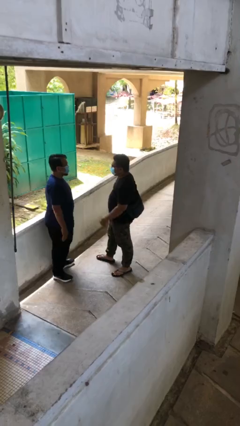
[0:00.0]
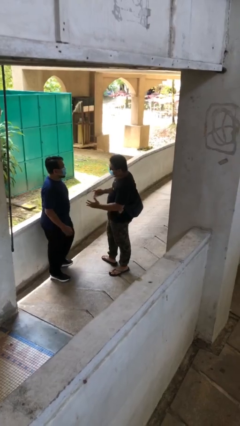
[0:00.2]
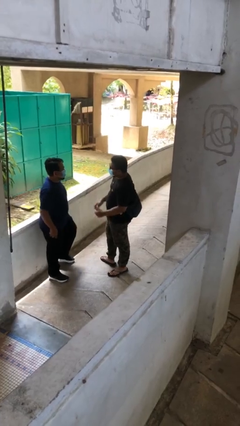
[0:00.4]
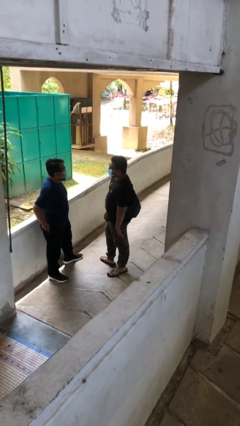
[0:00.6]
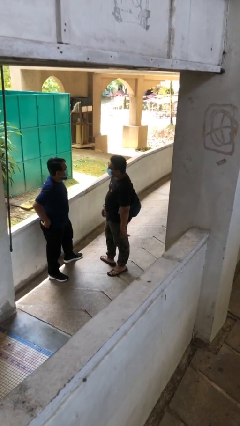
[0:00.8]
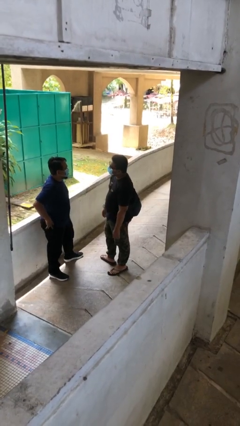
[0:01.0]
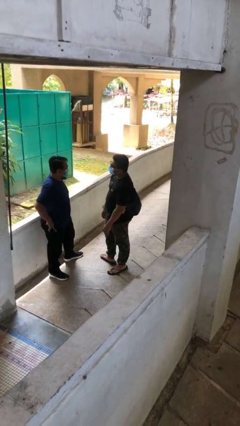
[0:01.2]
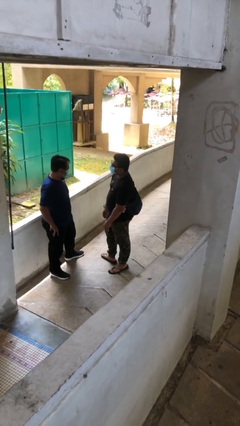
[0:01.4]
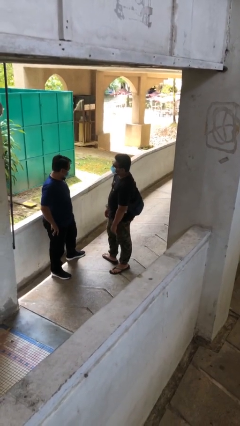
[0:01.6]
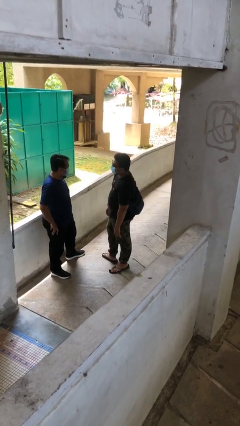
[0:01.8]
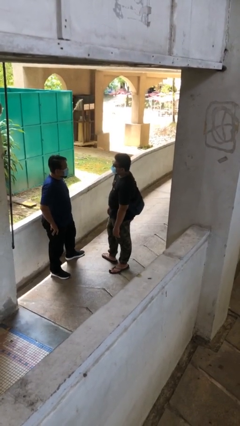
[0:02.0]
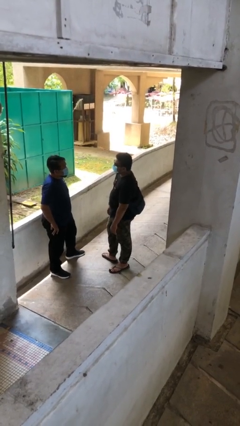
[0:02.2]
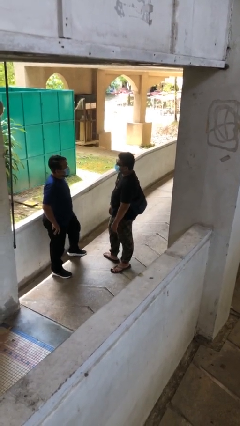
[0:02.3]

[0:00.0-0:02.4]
person talks to person

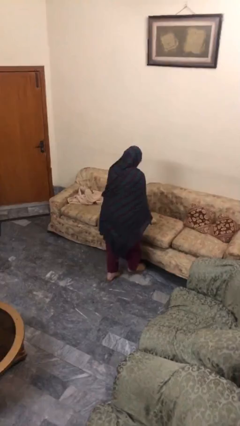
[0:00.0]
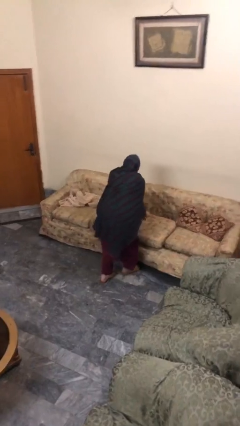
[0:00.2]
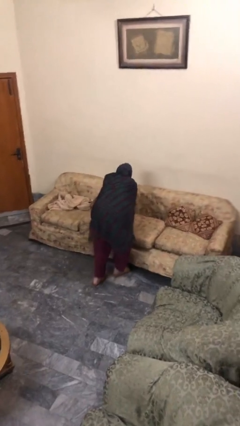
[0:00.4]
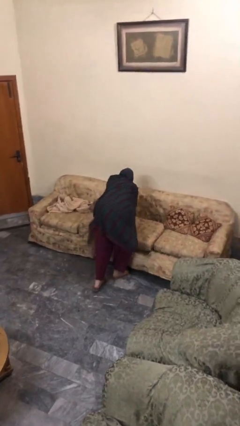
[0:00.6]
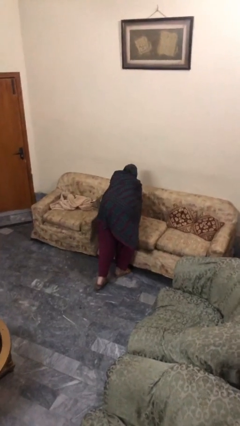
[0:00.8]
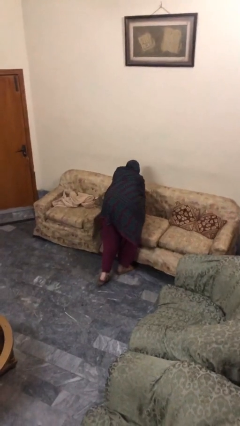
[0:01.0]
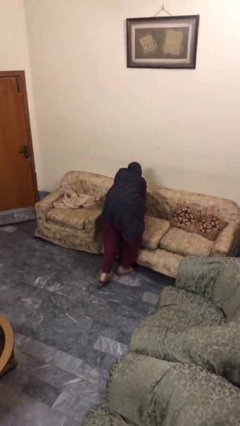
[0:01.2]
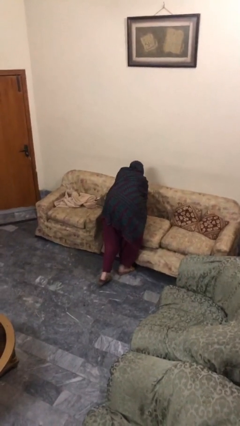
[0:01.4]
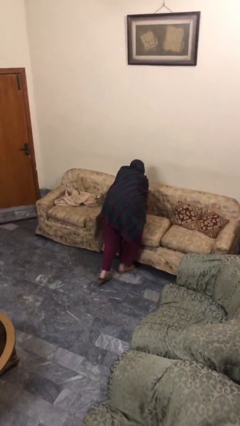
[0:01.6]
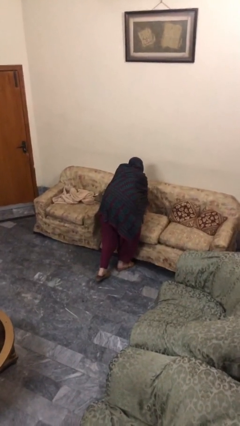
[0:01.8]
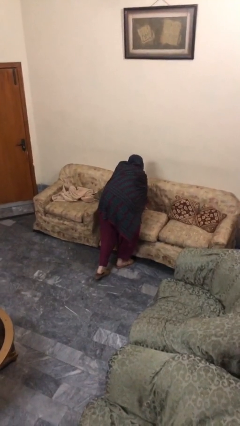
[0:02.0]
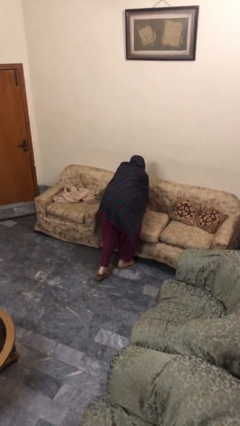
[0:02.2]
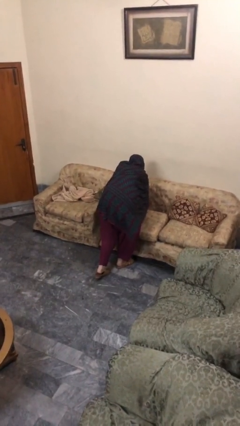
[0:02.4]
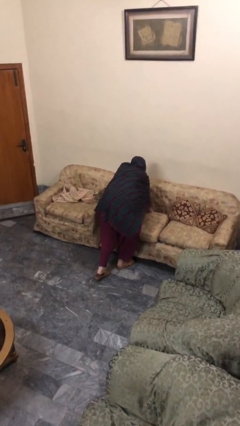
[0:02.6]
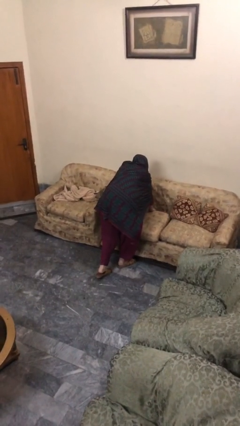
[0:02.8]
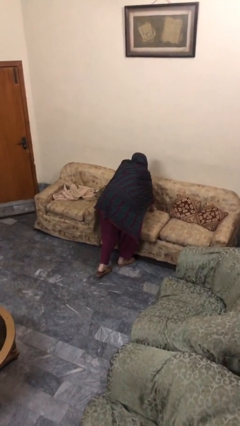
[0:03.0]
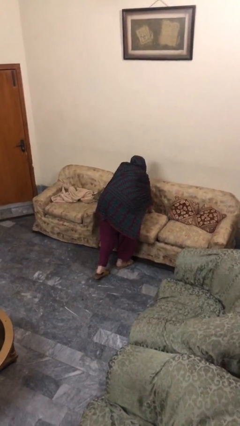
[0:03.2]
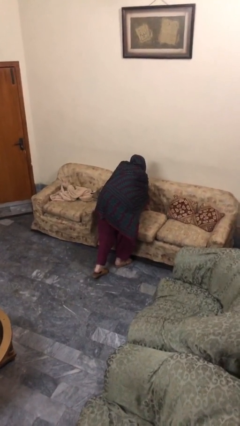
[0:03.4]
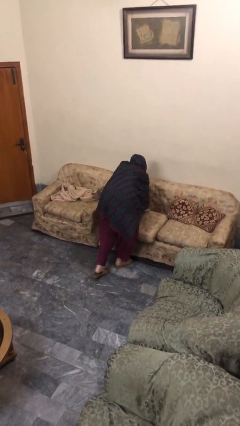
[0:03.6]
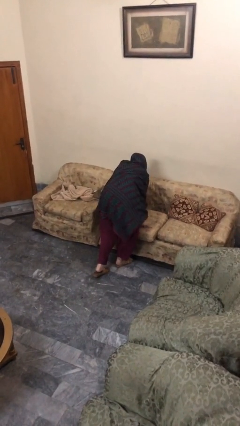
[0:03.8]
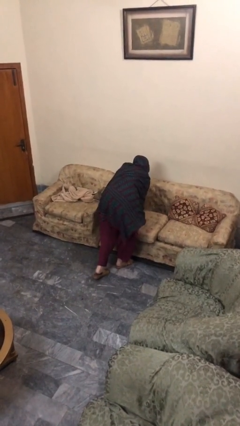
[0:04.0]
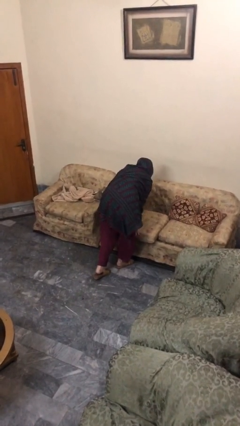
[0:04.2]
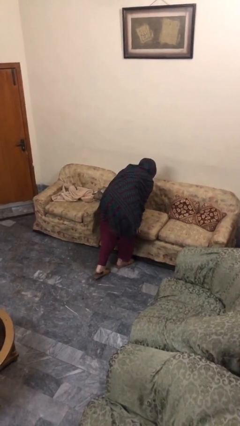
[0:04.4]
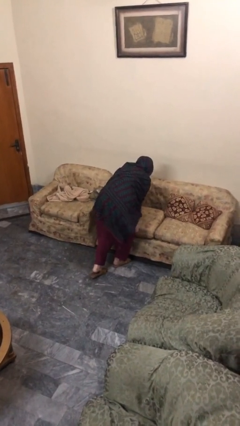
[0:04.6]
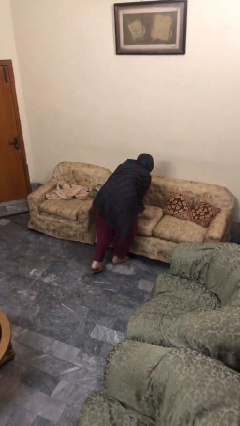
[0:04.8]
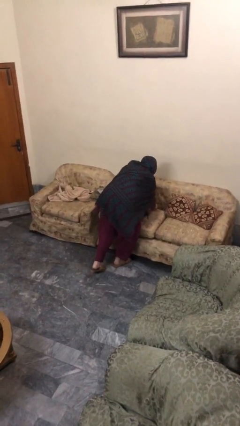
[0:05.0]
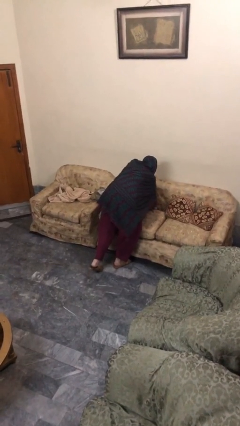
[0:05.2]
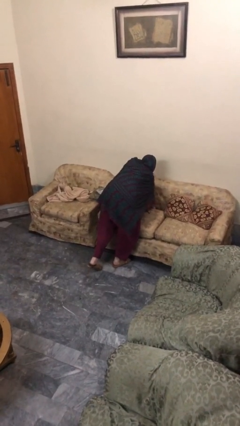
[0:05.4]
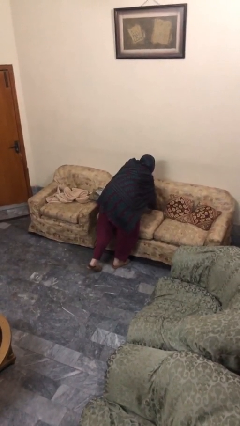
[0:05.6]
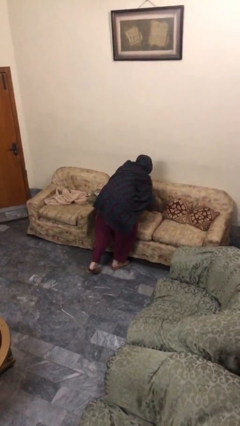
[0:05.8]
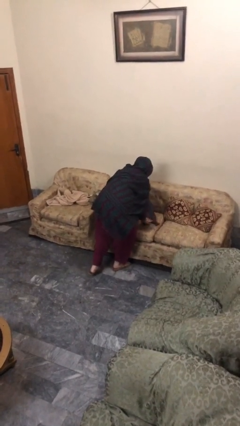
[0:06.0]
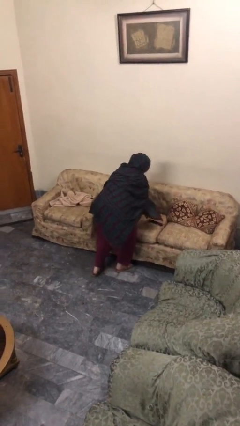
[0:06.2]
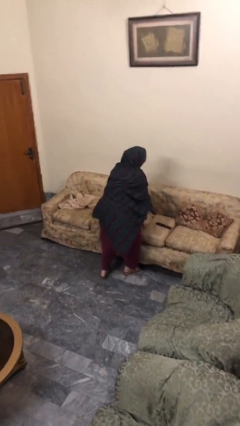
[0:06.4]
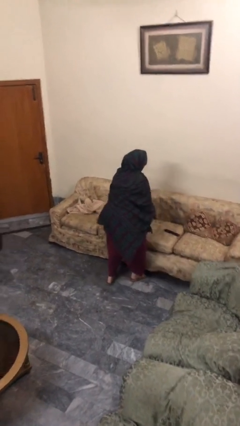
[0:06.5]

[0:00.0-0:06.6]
person searches in couch

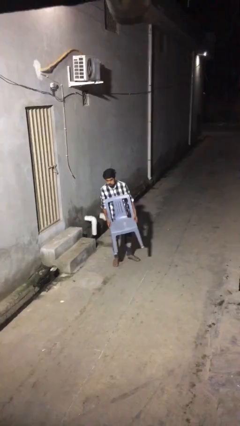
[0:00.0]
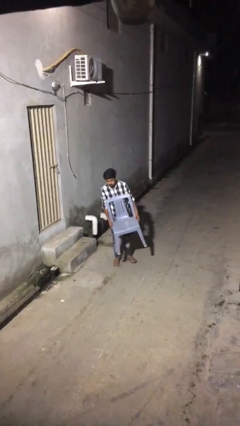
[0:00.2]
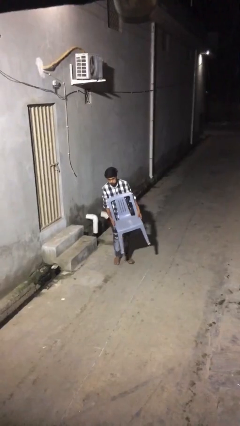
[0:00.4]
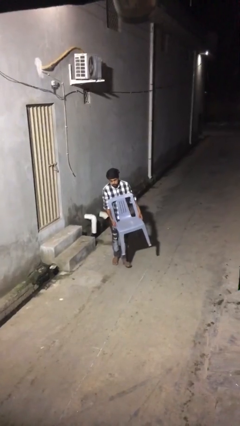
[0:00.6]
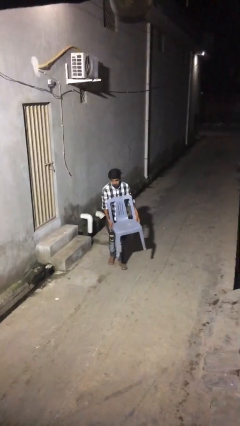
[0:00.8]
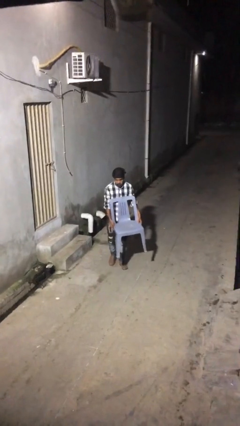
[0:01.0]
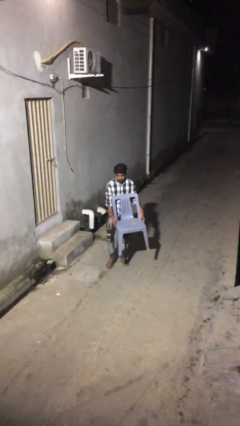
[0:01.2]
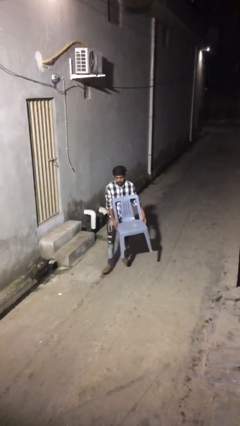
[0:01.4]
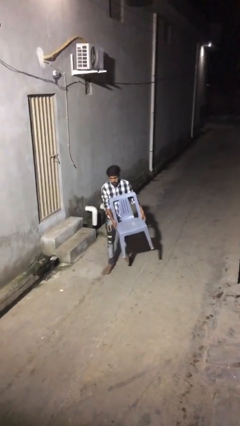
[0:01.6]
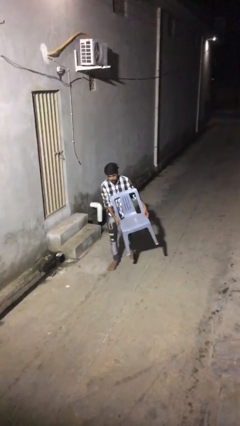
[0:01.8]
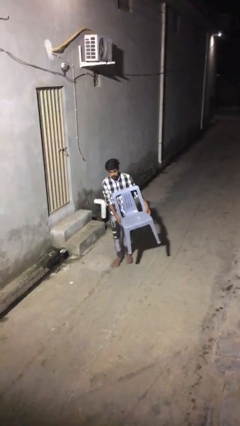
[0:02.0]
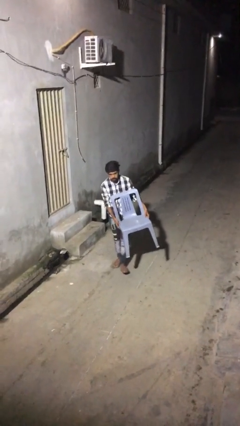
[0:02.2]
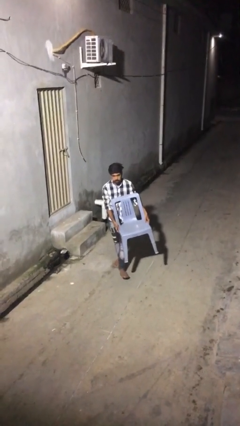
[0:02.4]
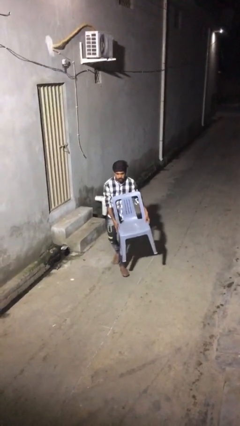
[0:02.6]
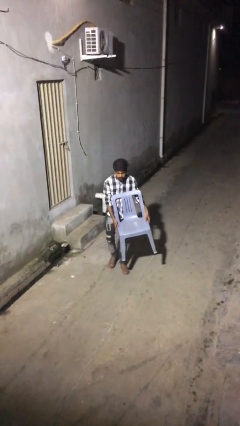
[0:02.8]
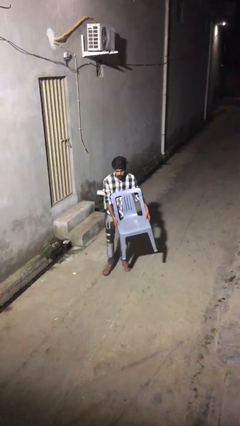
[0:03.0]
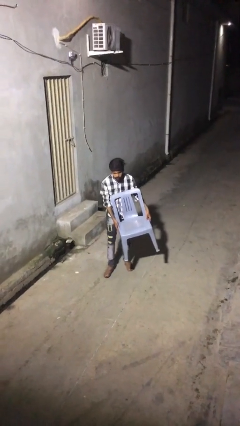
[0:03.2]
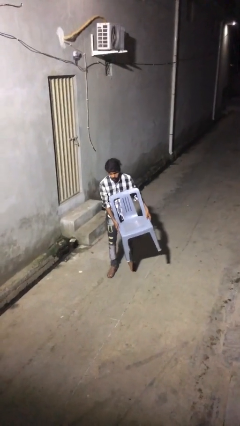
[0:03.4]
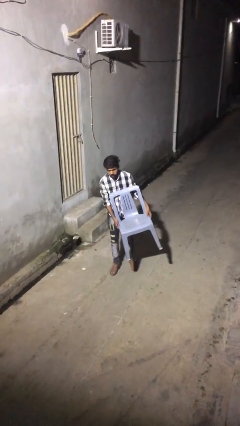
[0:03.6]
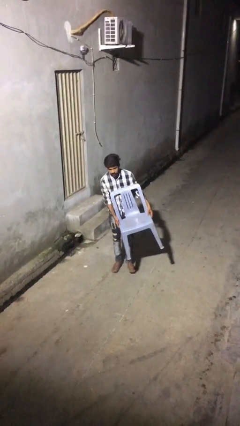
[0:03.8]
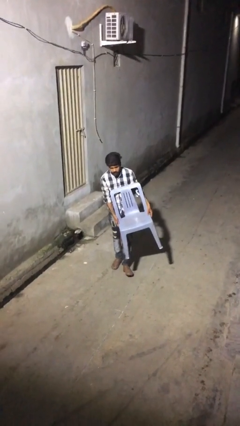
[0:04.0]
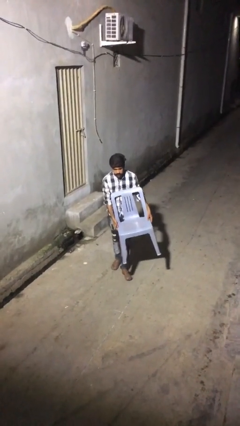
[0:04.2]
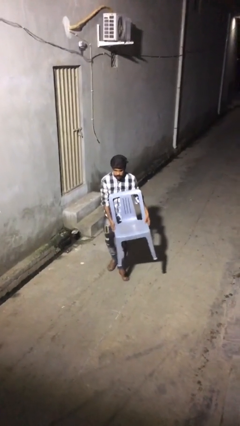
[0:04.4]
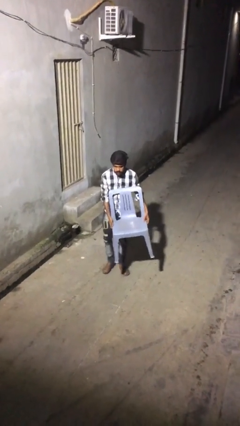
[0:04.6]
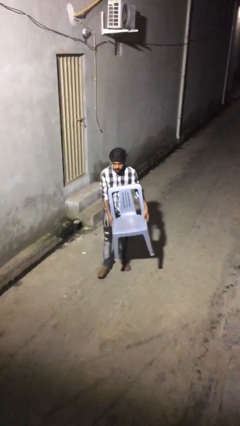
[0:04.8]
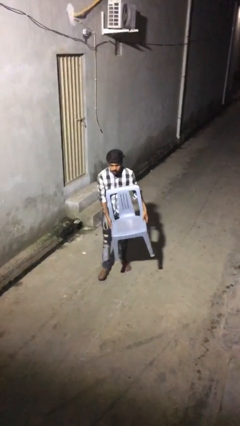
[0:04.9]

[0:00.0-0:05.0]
person carries heavy object

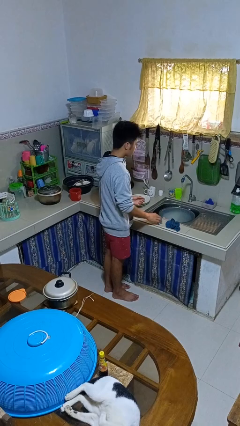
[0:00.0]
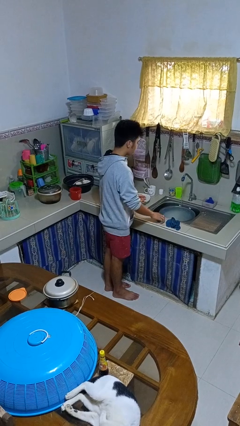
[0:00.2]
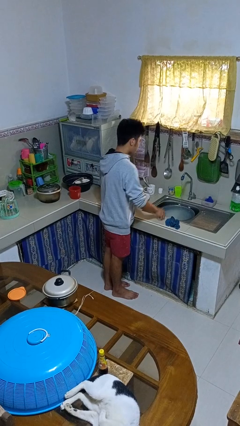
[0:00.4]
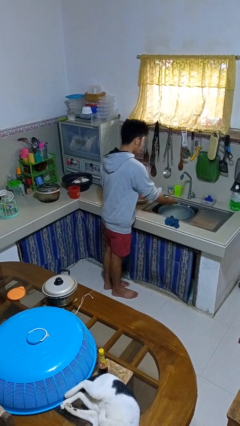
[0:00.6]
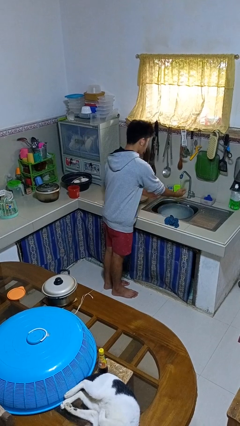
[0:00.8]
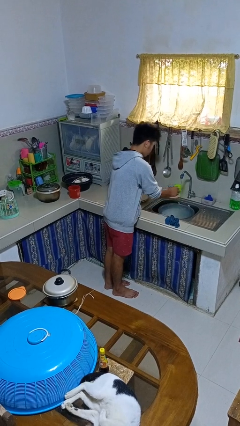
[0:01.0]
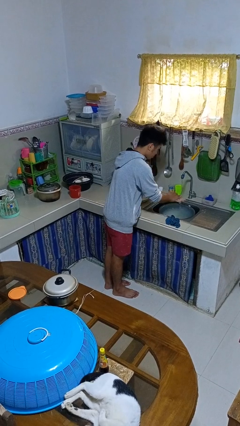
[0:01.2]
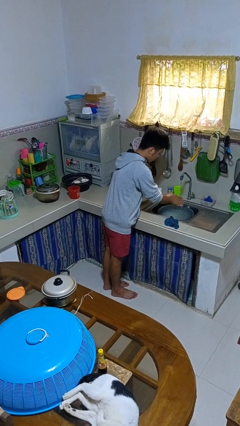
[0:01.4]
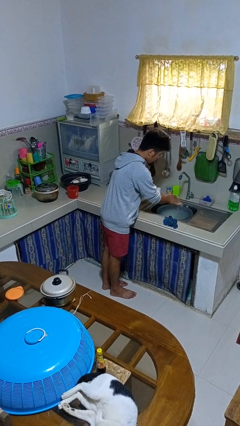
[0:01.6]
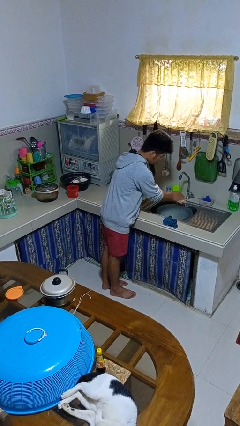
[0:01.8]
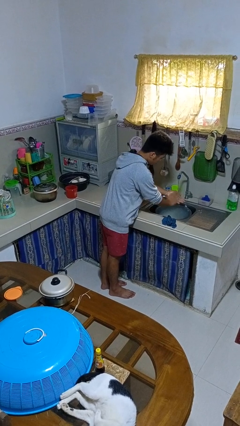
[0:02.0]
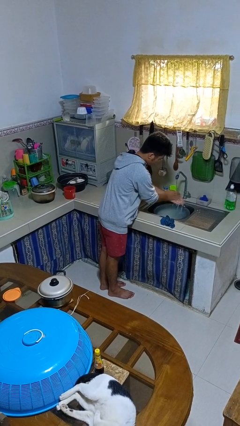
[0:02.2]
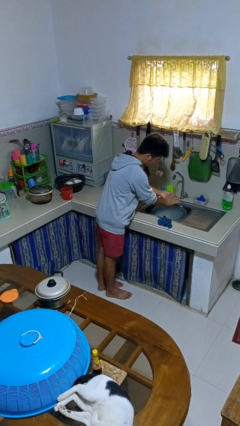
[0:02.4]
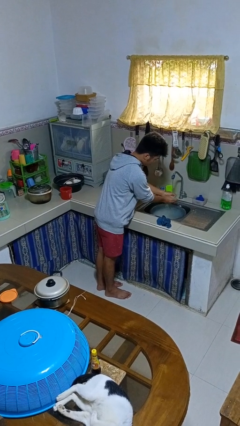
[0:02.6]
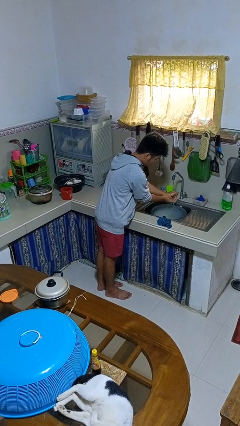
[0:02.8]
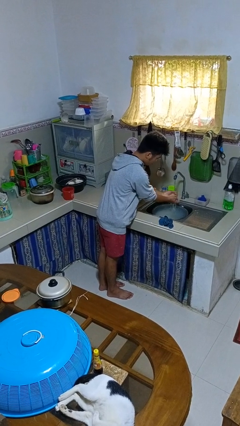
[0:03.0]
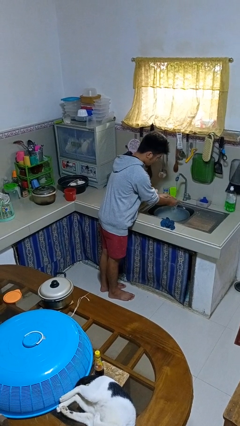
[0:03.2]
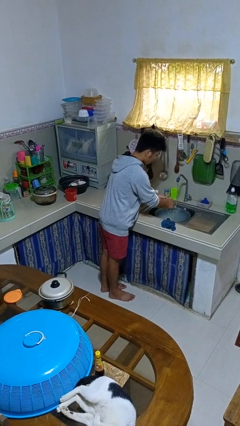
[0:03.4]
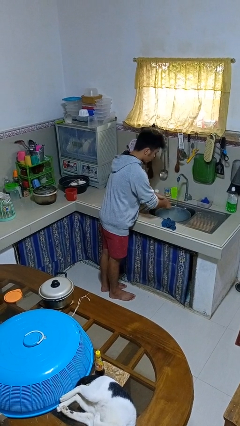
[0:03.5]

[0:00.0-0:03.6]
person washes hands

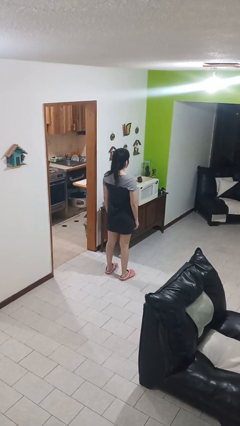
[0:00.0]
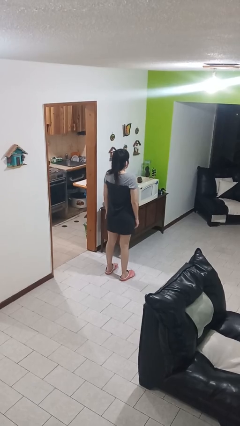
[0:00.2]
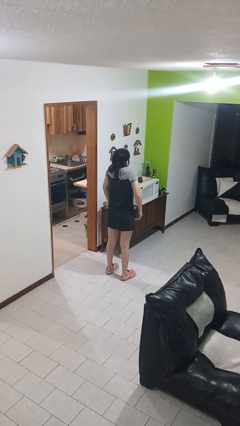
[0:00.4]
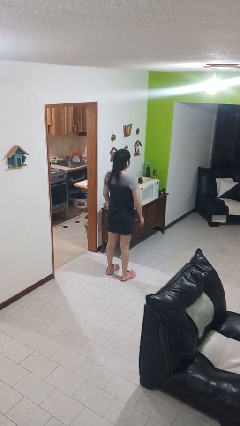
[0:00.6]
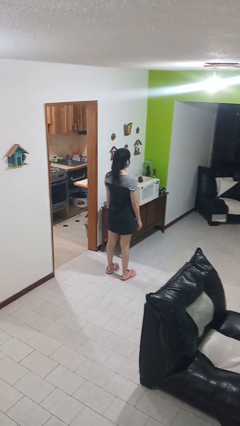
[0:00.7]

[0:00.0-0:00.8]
person shrugs
